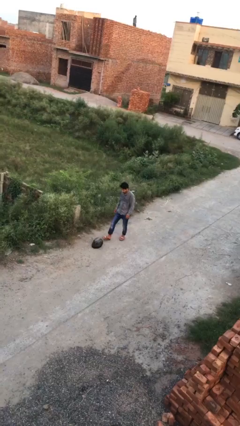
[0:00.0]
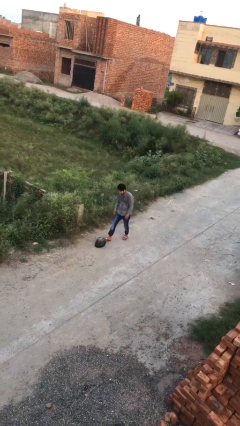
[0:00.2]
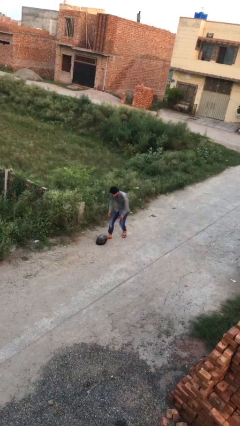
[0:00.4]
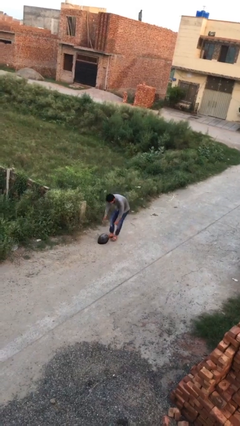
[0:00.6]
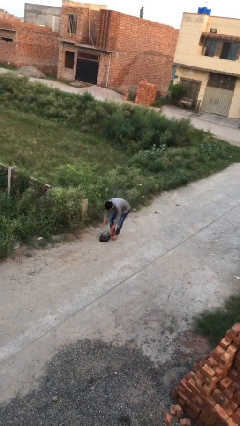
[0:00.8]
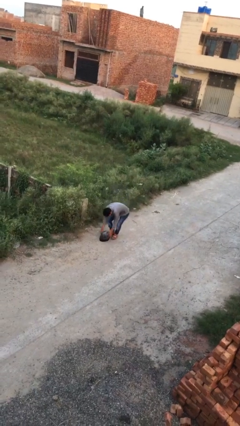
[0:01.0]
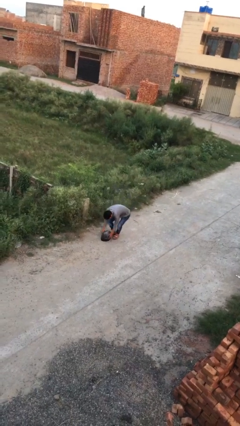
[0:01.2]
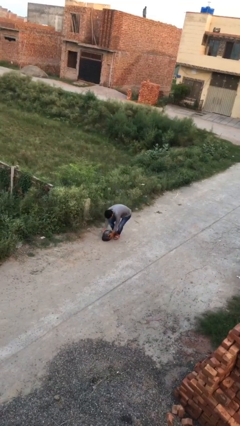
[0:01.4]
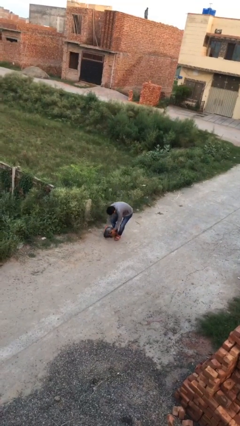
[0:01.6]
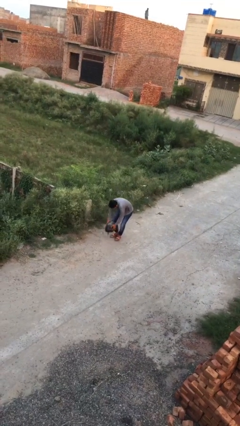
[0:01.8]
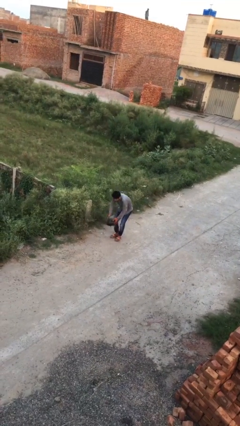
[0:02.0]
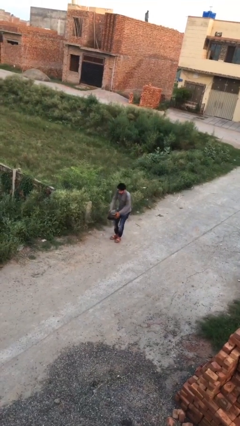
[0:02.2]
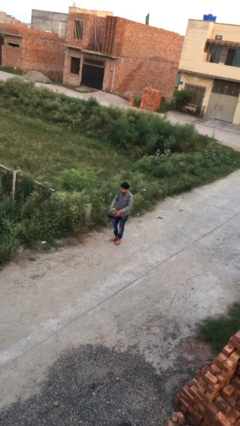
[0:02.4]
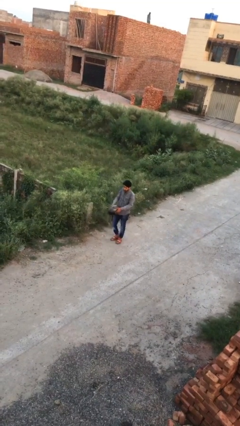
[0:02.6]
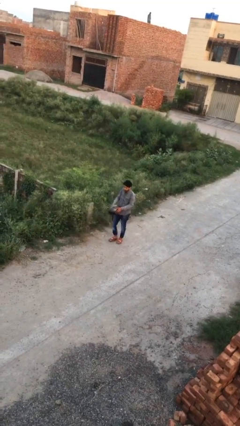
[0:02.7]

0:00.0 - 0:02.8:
person picks up object from floor

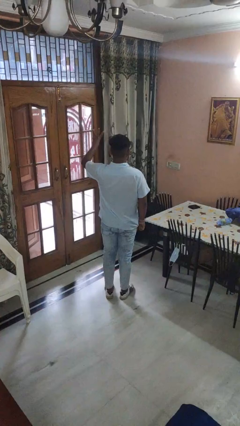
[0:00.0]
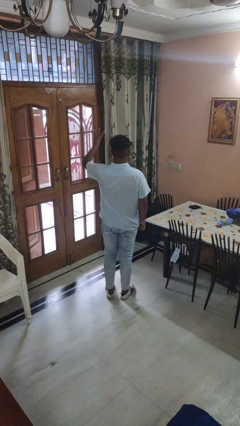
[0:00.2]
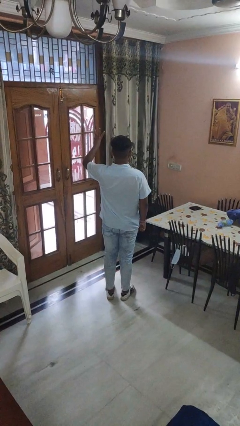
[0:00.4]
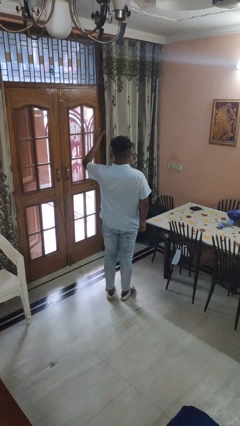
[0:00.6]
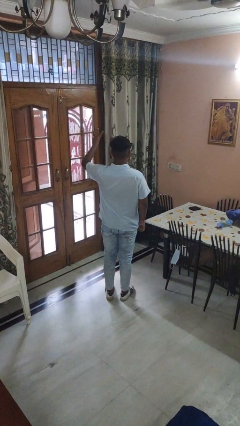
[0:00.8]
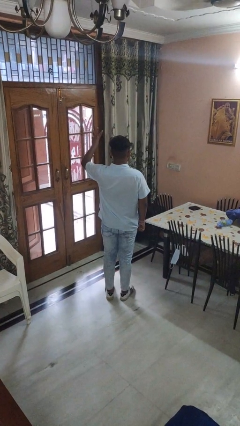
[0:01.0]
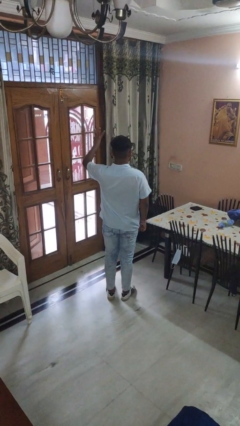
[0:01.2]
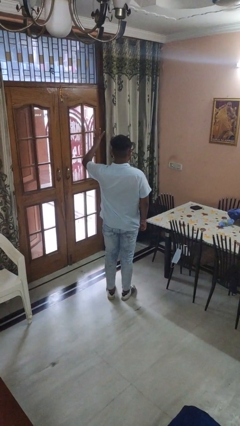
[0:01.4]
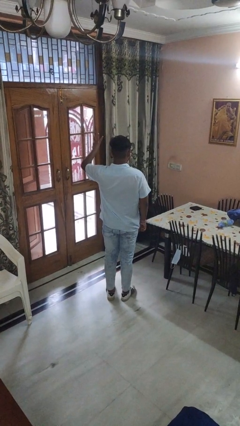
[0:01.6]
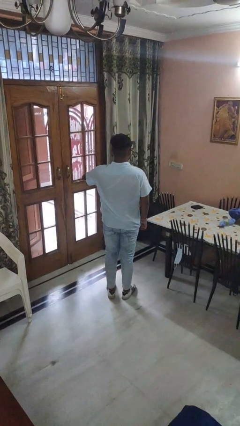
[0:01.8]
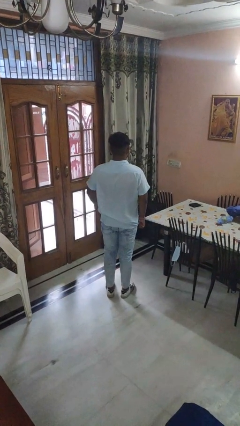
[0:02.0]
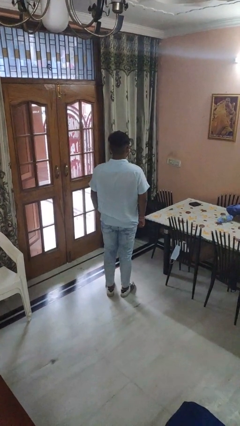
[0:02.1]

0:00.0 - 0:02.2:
person gestures number three

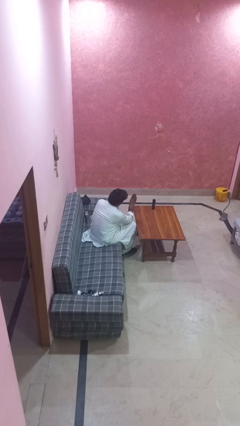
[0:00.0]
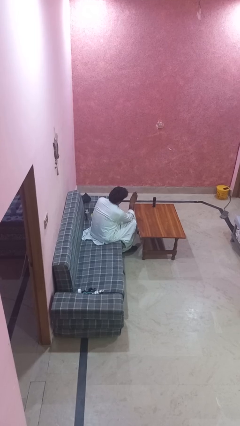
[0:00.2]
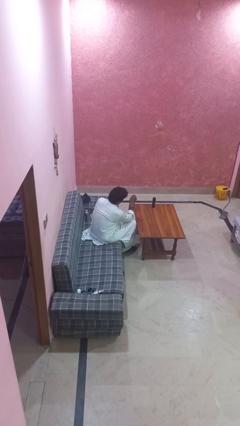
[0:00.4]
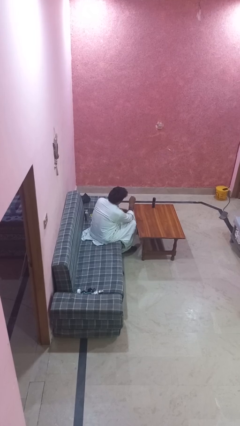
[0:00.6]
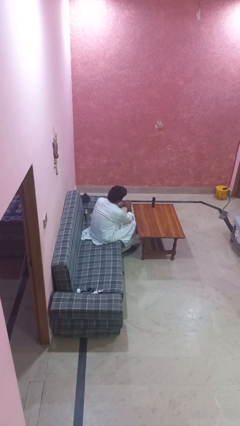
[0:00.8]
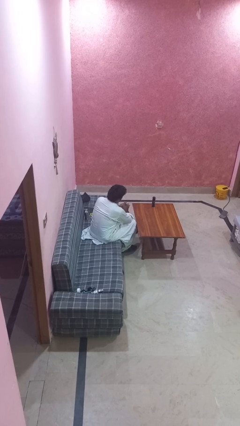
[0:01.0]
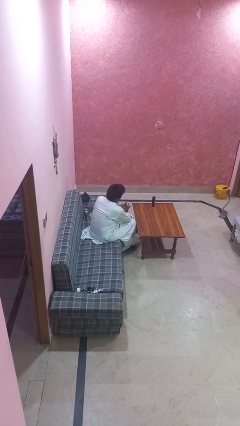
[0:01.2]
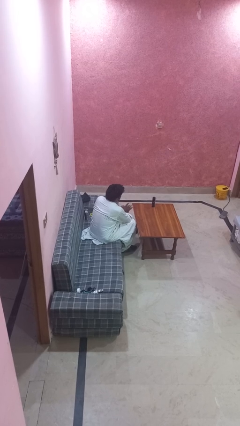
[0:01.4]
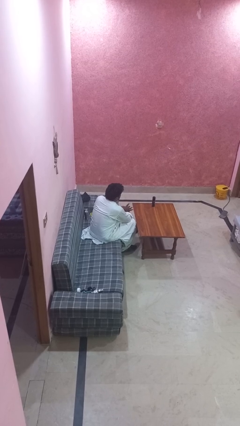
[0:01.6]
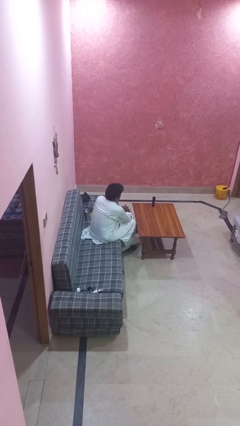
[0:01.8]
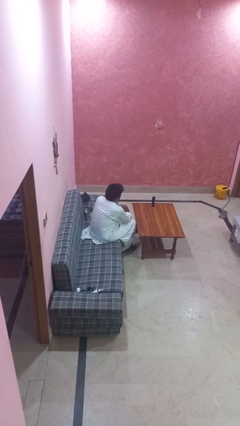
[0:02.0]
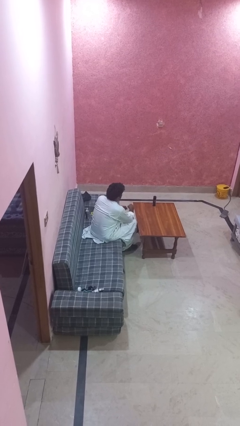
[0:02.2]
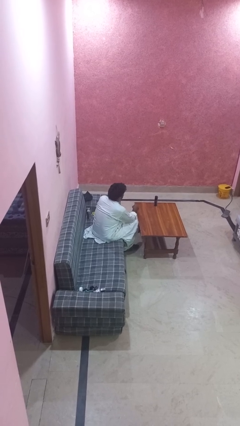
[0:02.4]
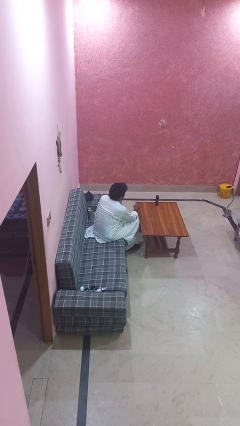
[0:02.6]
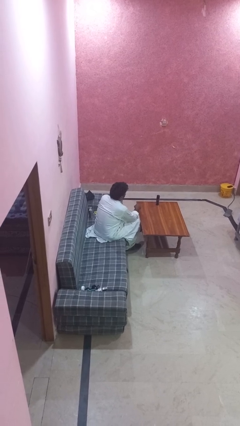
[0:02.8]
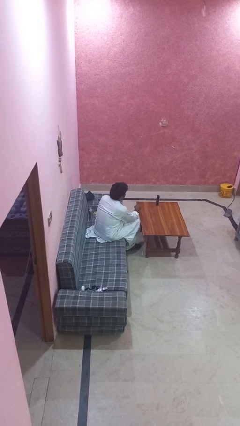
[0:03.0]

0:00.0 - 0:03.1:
person takes off ring

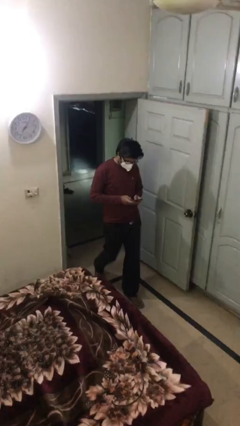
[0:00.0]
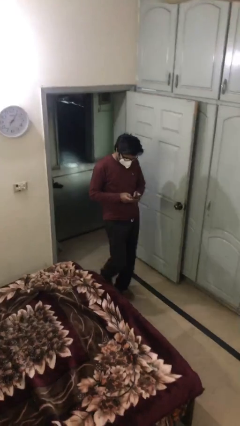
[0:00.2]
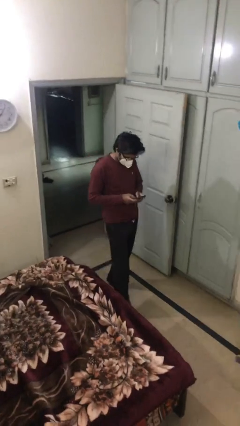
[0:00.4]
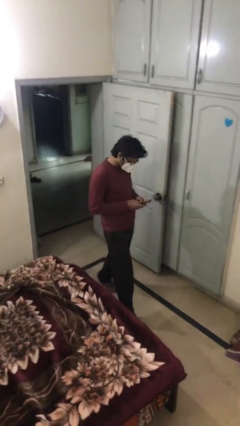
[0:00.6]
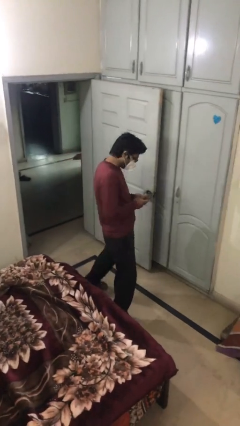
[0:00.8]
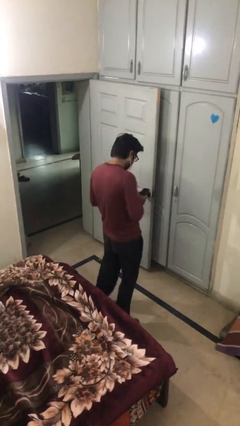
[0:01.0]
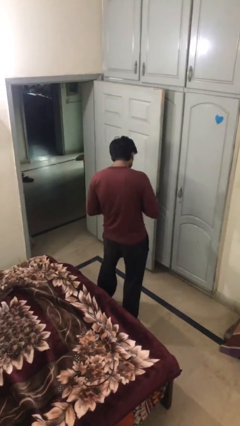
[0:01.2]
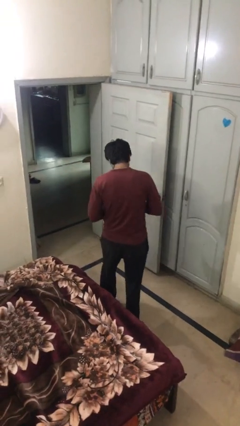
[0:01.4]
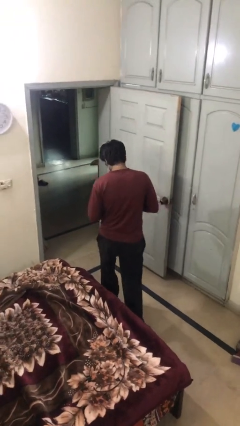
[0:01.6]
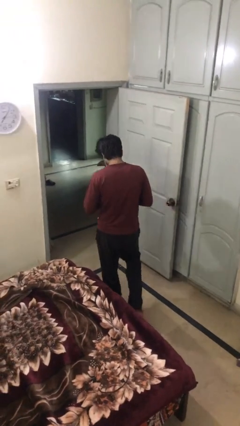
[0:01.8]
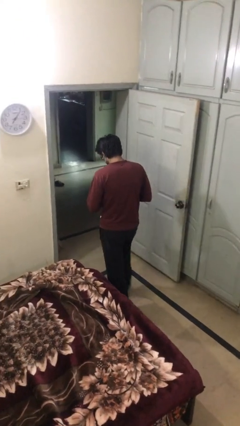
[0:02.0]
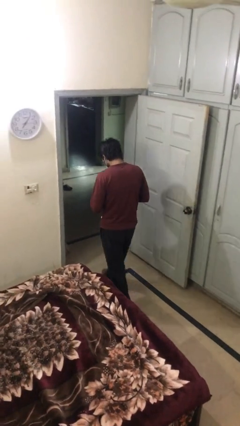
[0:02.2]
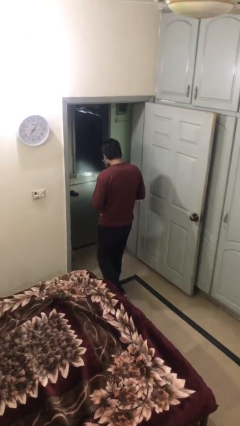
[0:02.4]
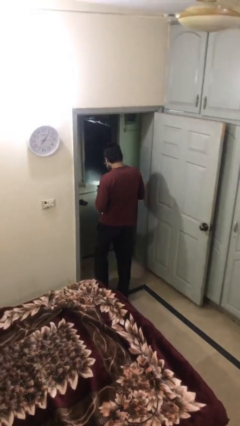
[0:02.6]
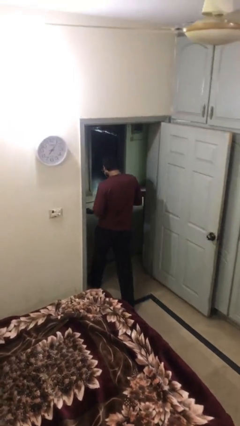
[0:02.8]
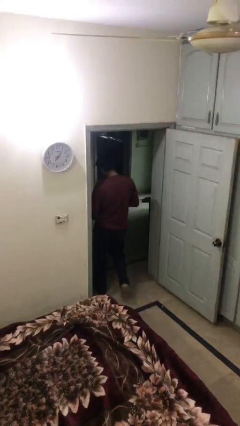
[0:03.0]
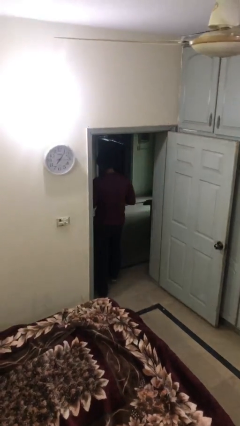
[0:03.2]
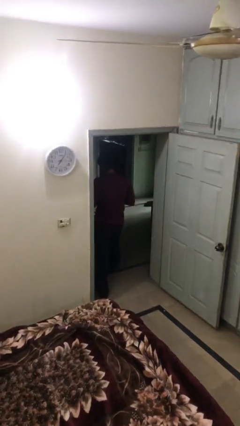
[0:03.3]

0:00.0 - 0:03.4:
person exits scene through structure

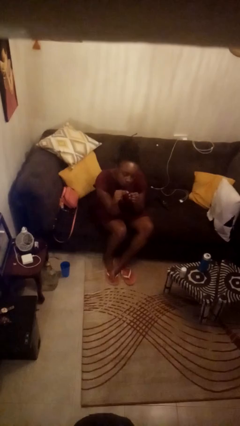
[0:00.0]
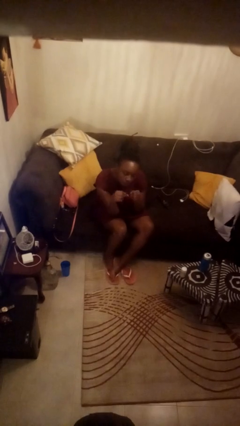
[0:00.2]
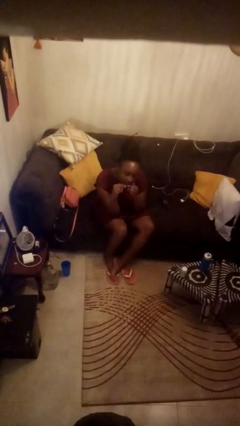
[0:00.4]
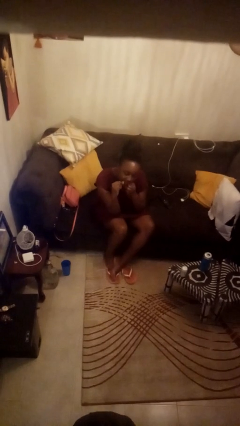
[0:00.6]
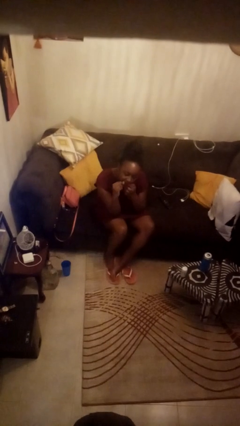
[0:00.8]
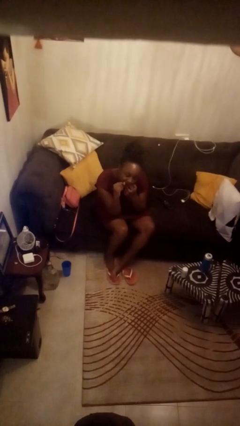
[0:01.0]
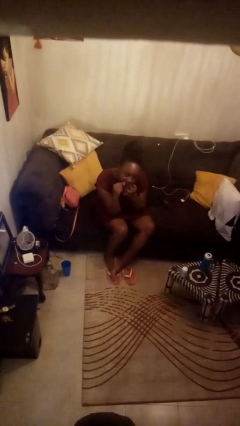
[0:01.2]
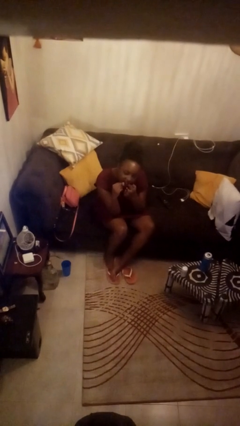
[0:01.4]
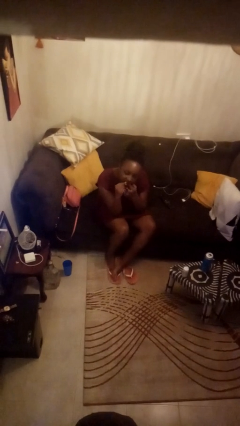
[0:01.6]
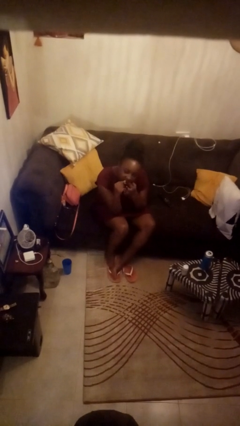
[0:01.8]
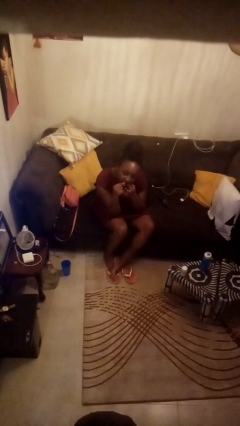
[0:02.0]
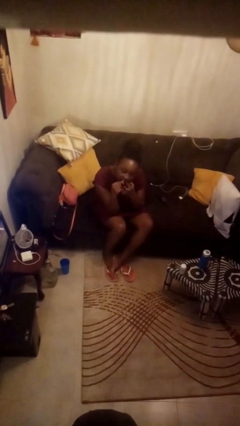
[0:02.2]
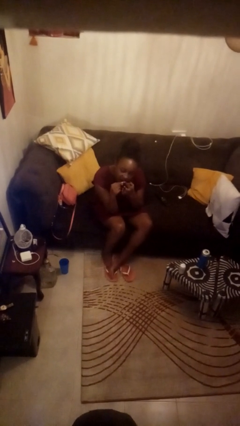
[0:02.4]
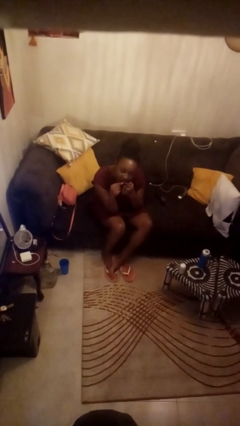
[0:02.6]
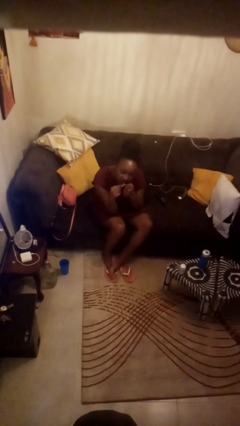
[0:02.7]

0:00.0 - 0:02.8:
person flosses

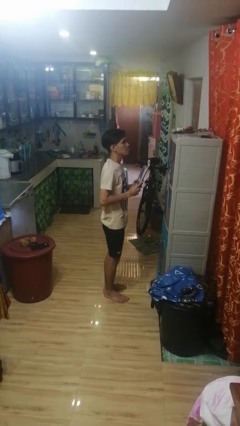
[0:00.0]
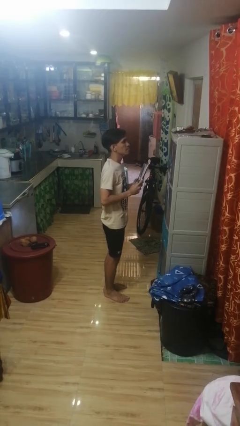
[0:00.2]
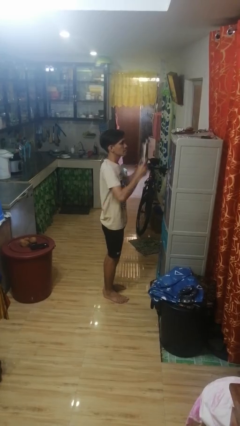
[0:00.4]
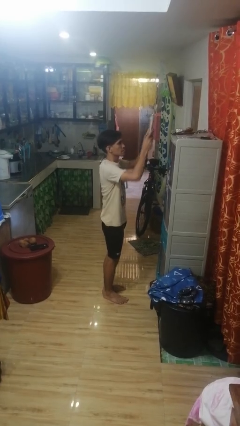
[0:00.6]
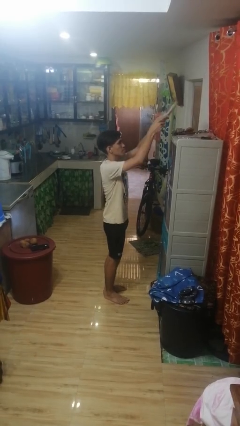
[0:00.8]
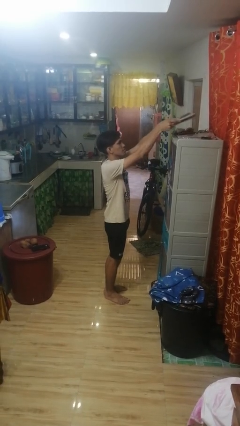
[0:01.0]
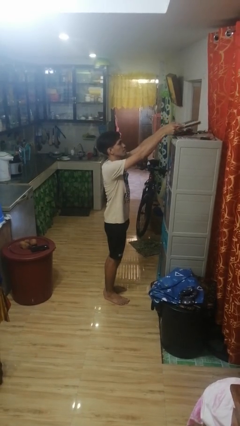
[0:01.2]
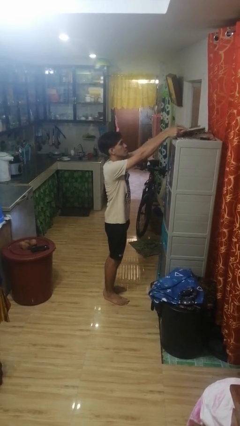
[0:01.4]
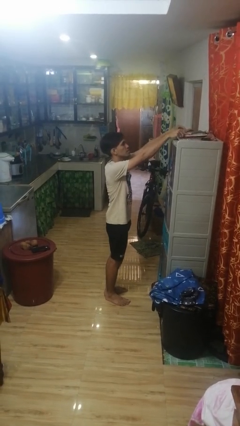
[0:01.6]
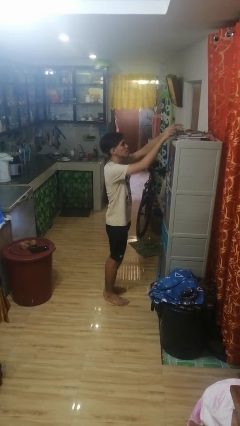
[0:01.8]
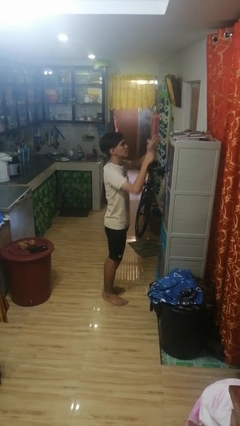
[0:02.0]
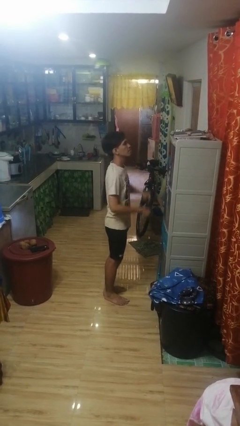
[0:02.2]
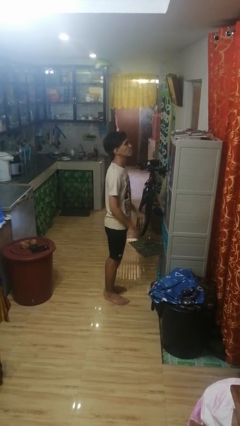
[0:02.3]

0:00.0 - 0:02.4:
person puts down object on shelf

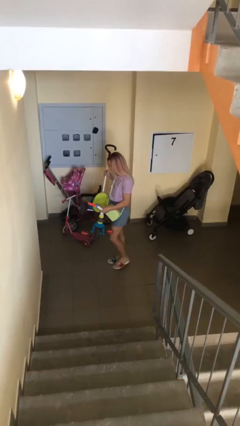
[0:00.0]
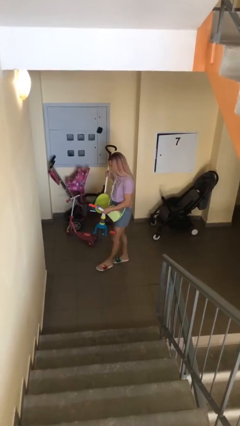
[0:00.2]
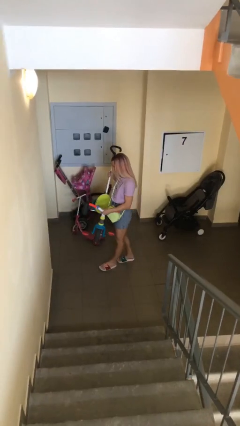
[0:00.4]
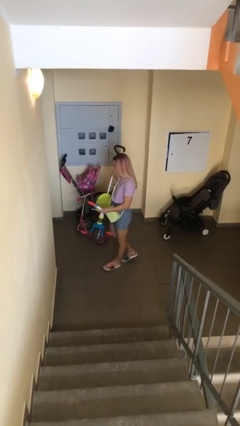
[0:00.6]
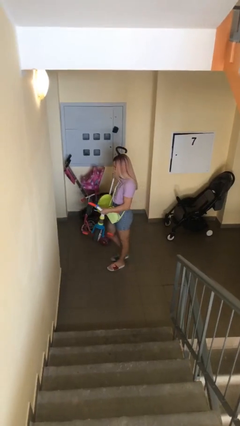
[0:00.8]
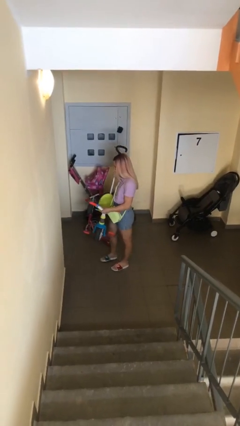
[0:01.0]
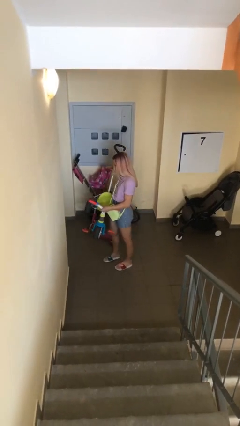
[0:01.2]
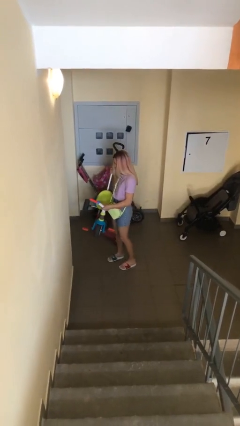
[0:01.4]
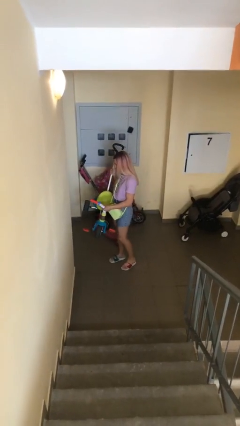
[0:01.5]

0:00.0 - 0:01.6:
person carries bicycle
